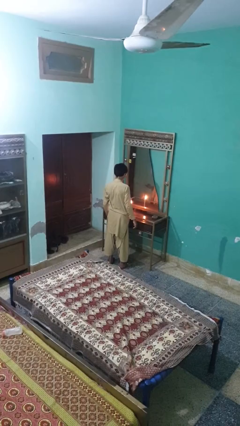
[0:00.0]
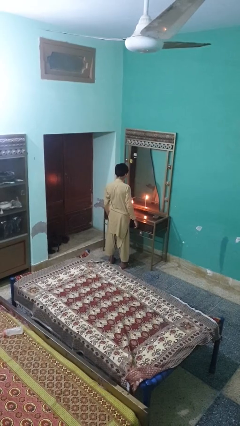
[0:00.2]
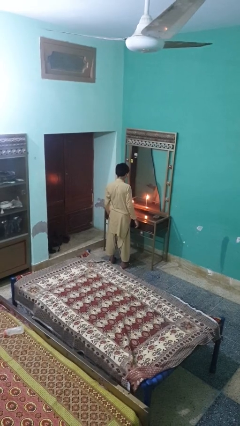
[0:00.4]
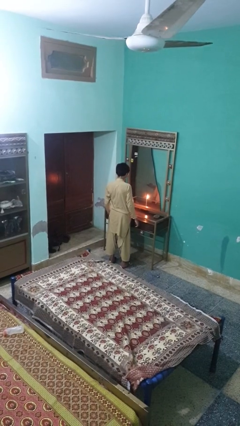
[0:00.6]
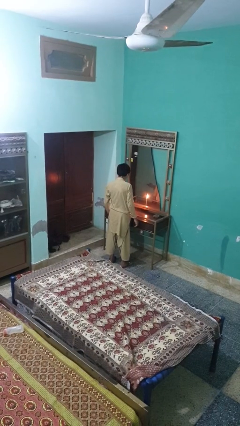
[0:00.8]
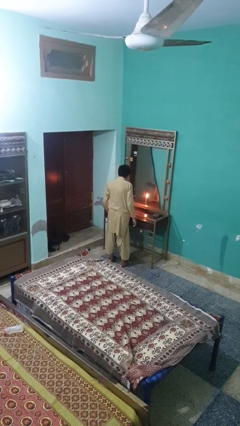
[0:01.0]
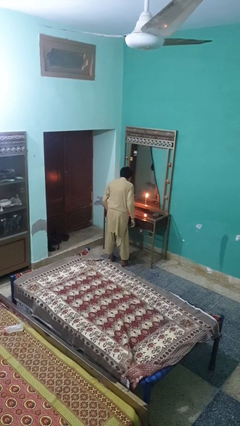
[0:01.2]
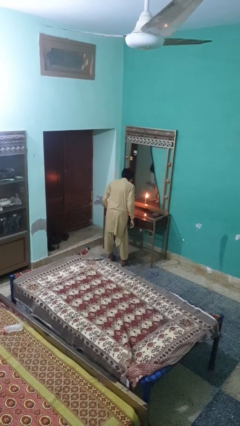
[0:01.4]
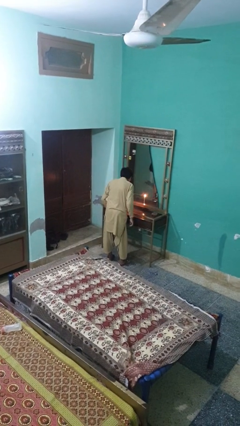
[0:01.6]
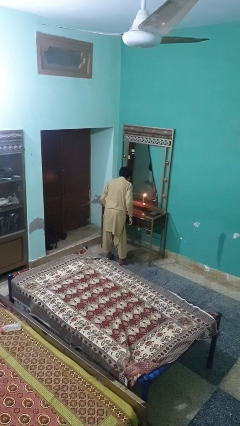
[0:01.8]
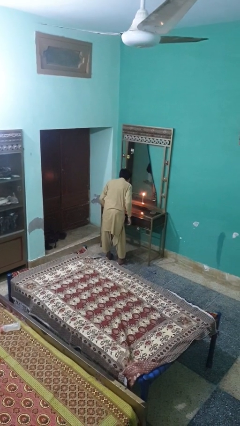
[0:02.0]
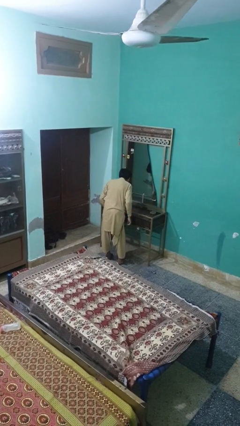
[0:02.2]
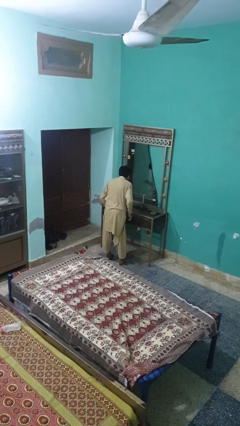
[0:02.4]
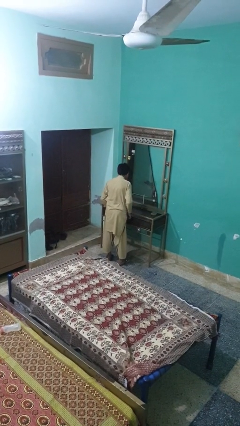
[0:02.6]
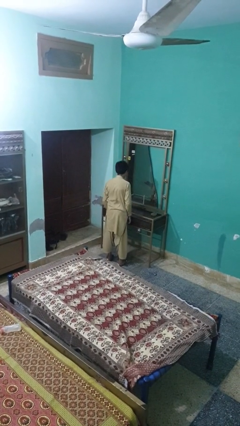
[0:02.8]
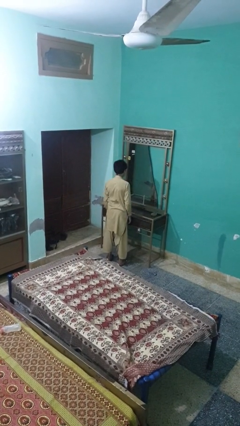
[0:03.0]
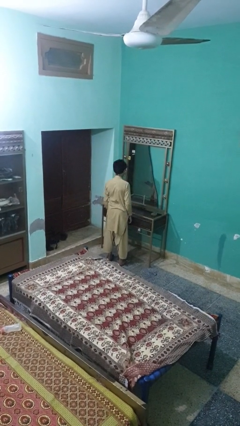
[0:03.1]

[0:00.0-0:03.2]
person extinguishes candle

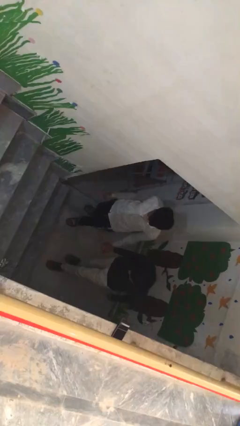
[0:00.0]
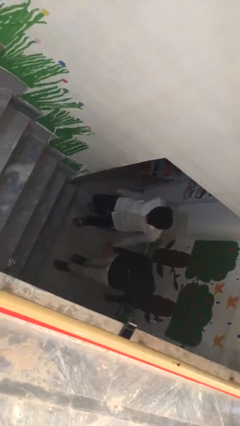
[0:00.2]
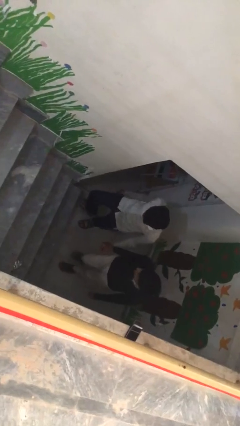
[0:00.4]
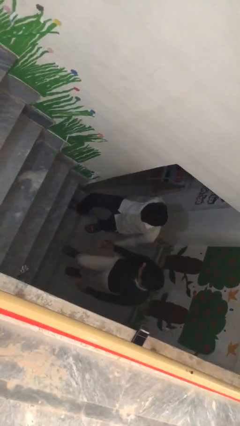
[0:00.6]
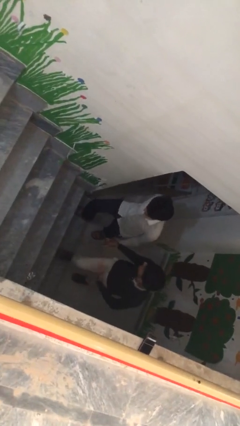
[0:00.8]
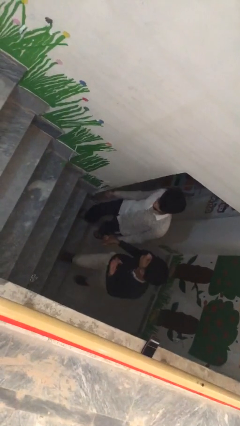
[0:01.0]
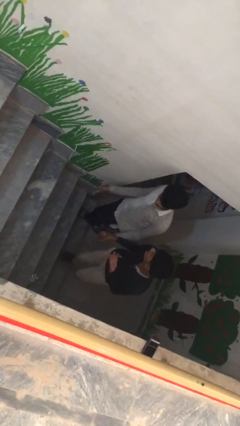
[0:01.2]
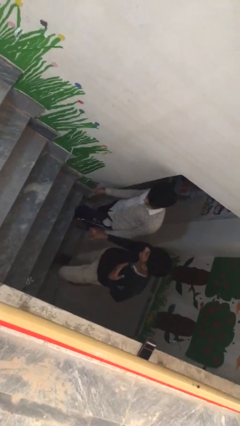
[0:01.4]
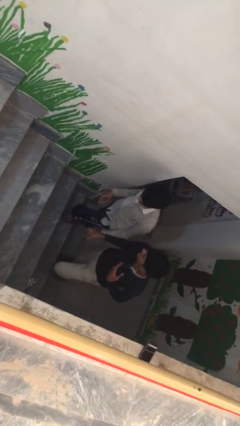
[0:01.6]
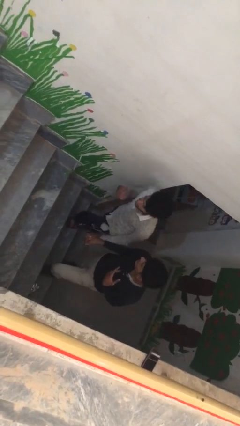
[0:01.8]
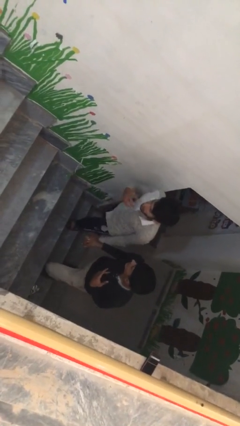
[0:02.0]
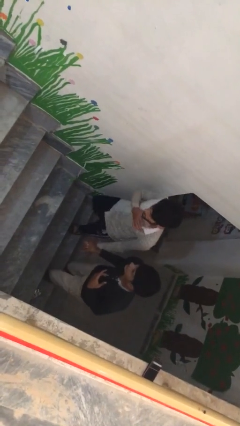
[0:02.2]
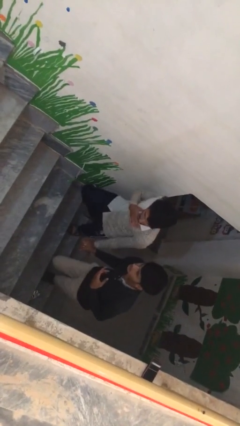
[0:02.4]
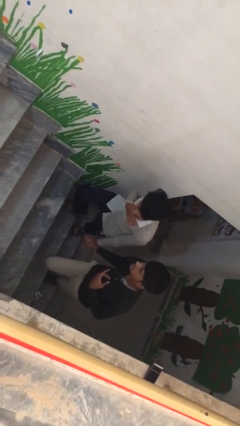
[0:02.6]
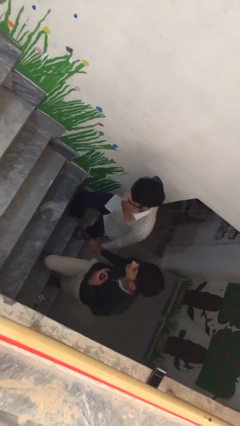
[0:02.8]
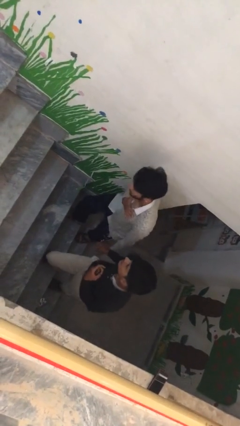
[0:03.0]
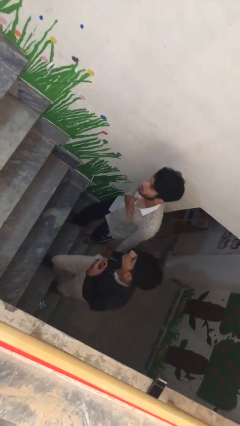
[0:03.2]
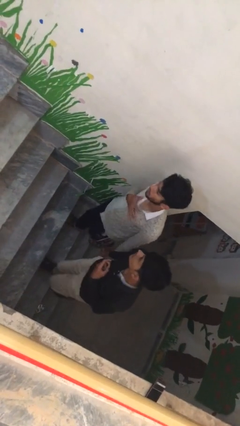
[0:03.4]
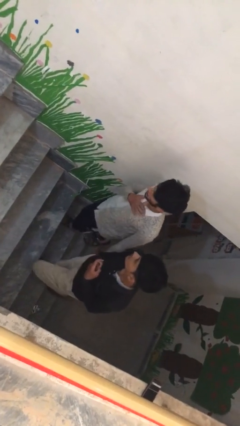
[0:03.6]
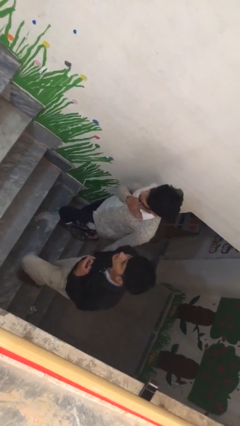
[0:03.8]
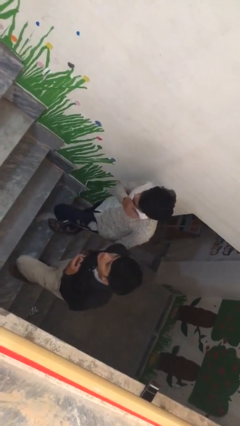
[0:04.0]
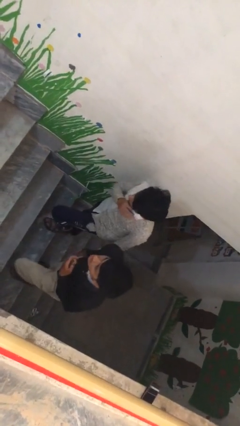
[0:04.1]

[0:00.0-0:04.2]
person holds hand

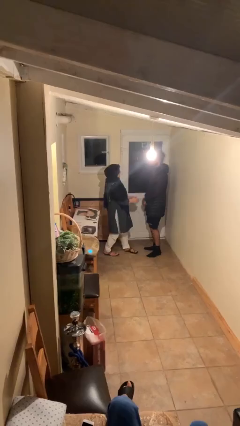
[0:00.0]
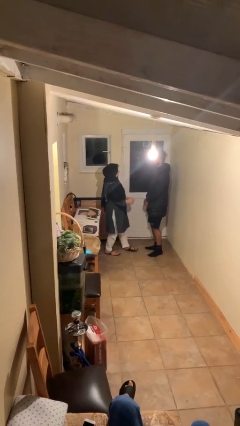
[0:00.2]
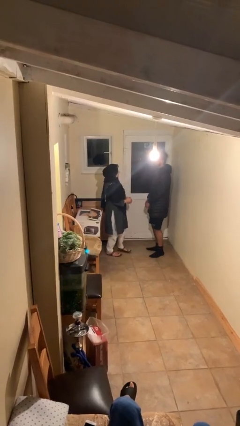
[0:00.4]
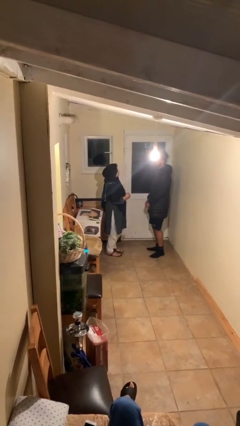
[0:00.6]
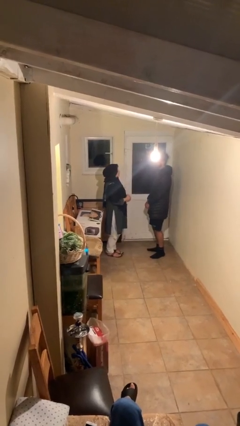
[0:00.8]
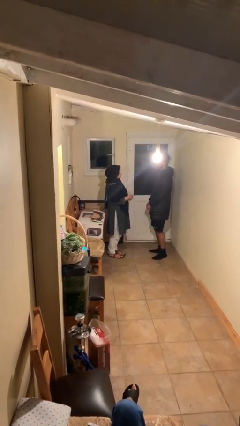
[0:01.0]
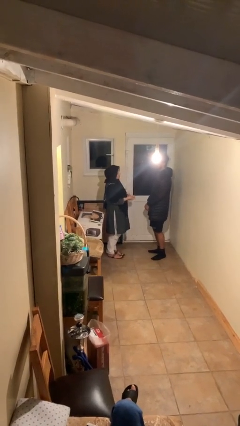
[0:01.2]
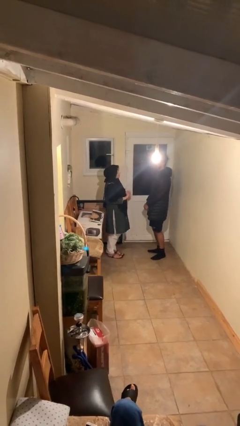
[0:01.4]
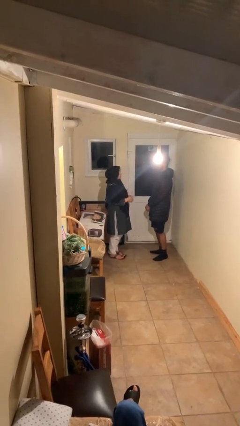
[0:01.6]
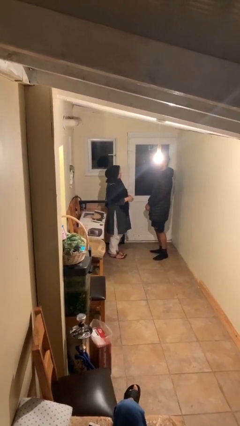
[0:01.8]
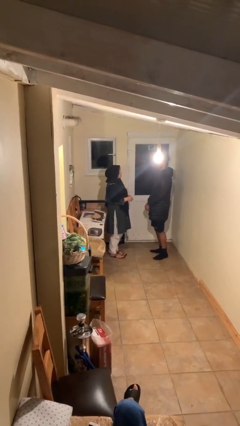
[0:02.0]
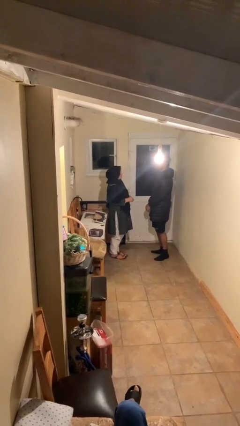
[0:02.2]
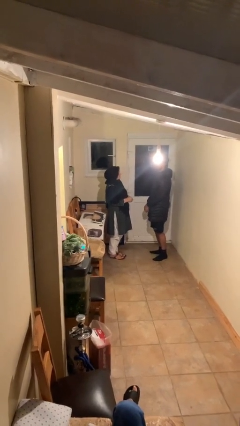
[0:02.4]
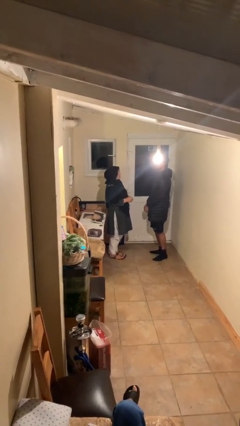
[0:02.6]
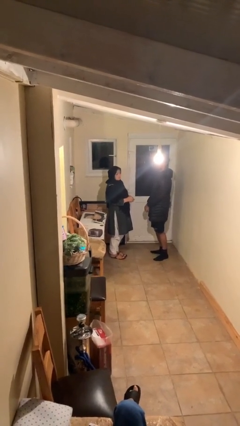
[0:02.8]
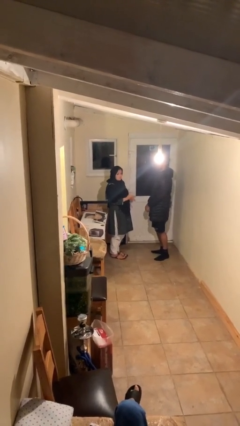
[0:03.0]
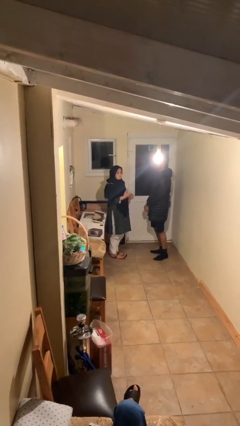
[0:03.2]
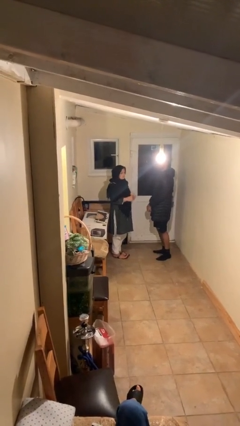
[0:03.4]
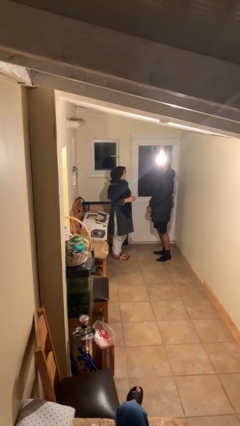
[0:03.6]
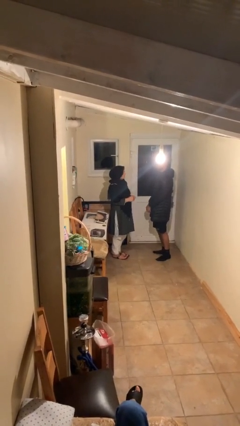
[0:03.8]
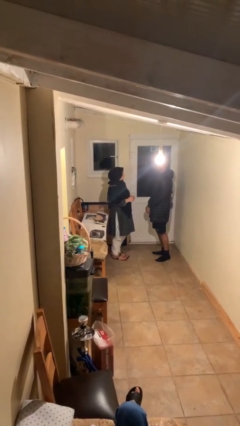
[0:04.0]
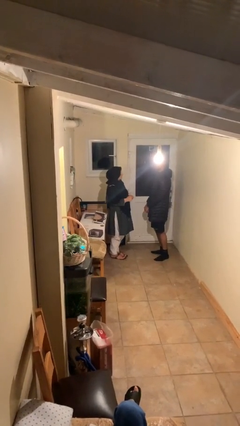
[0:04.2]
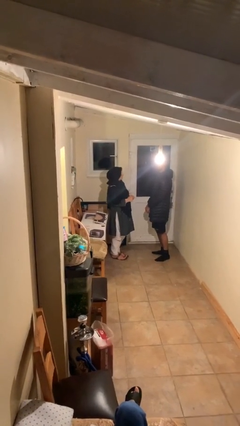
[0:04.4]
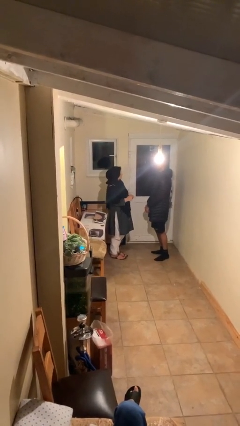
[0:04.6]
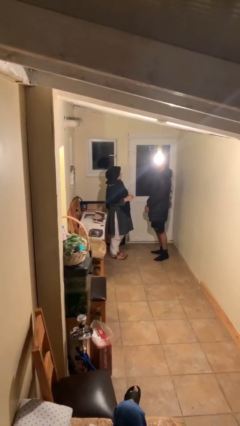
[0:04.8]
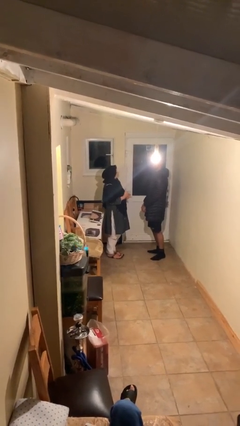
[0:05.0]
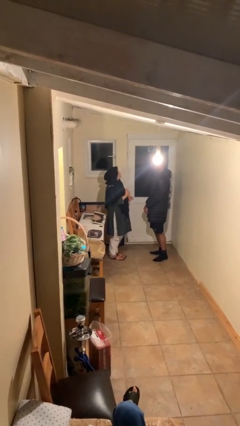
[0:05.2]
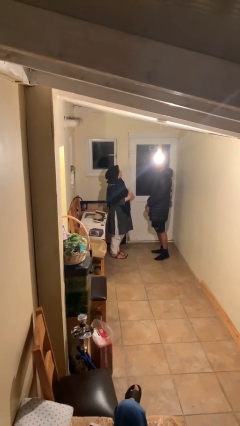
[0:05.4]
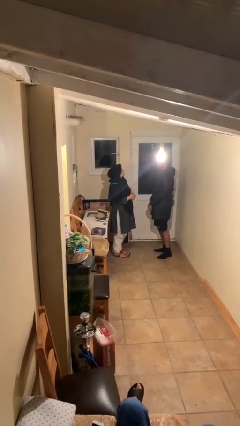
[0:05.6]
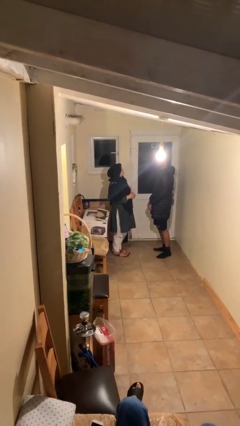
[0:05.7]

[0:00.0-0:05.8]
person talks to person

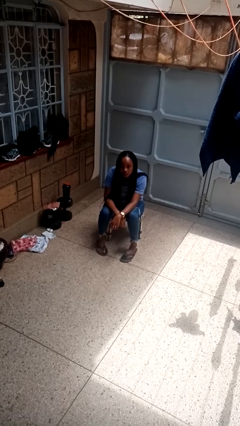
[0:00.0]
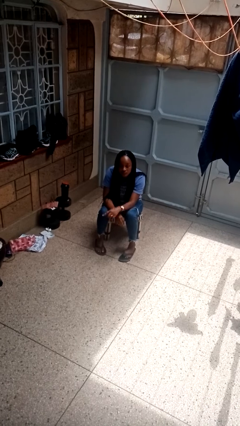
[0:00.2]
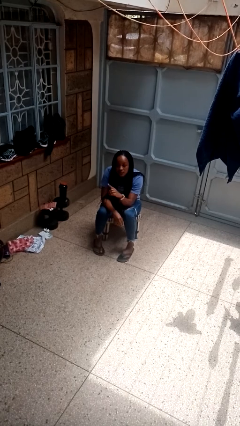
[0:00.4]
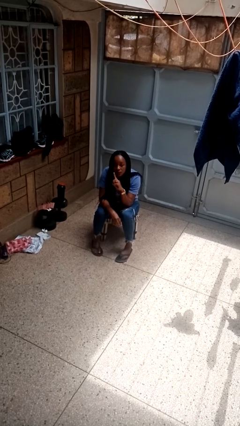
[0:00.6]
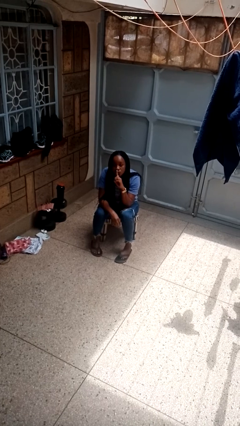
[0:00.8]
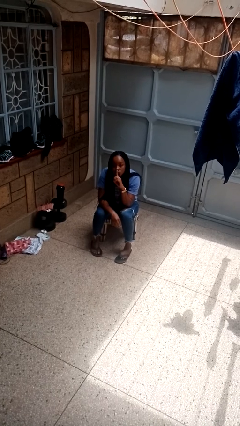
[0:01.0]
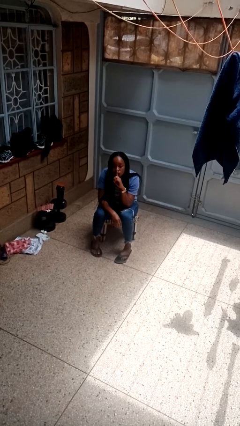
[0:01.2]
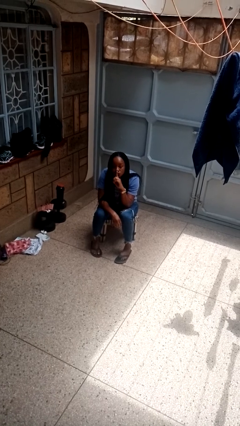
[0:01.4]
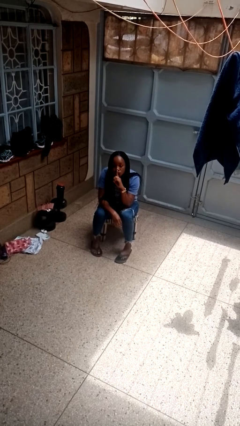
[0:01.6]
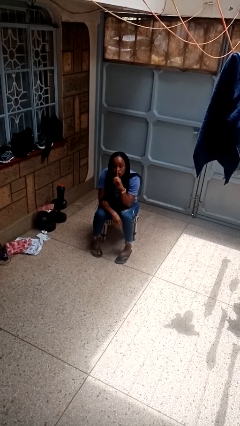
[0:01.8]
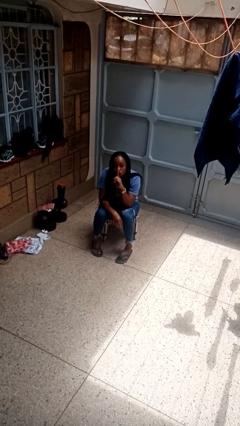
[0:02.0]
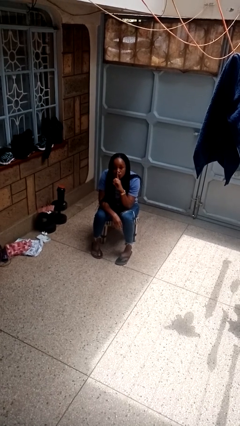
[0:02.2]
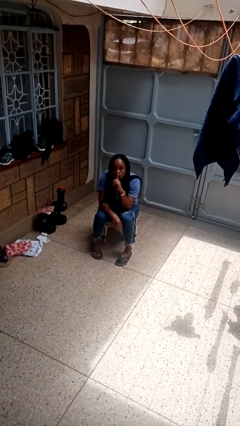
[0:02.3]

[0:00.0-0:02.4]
person gestures be quiet

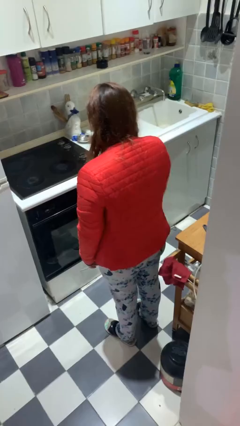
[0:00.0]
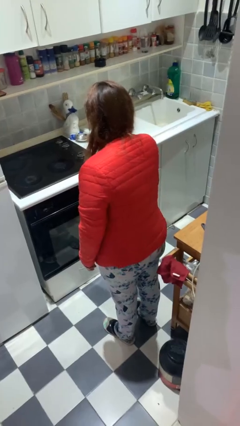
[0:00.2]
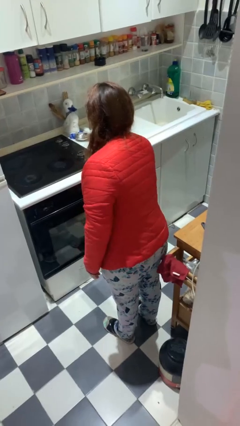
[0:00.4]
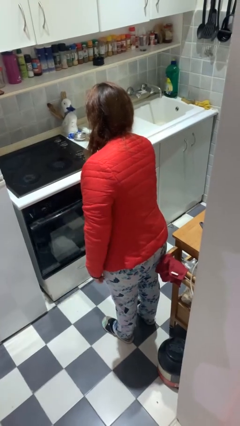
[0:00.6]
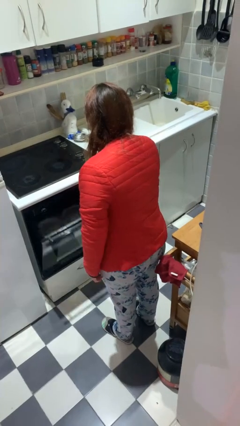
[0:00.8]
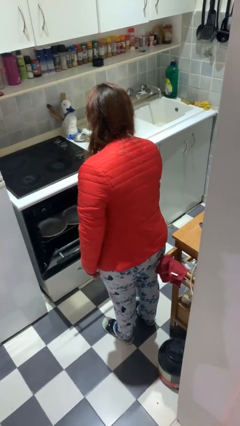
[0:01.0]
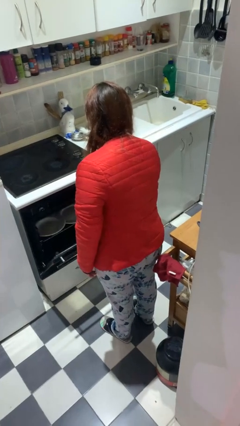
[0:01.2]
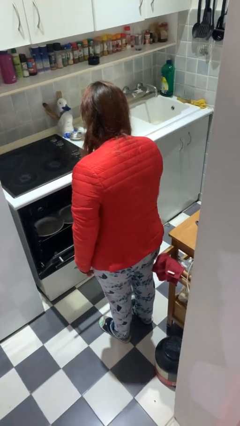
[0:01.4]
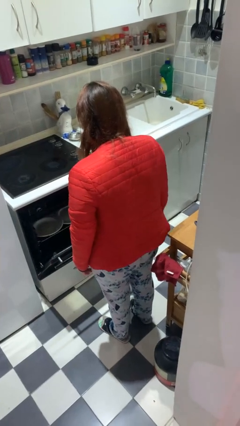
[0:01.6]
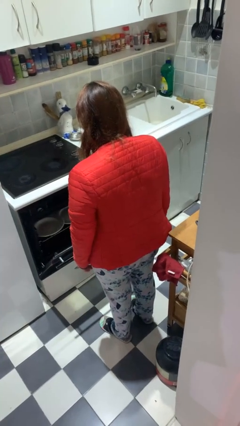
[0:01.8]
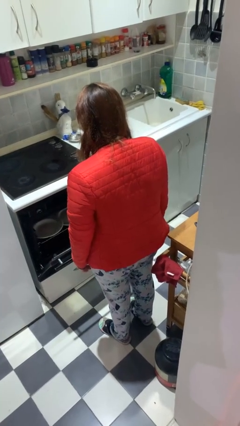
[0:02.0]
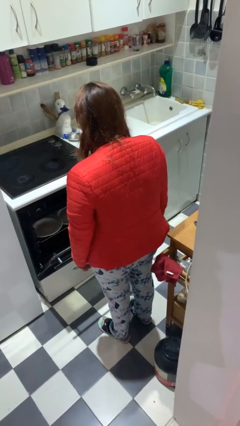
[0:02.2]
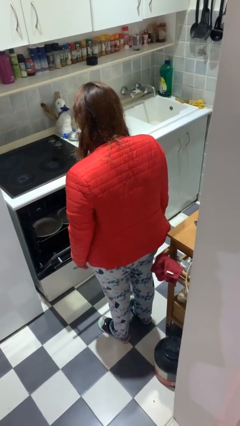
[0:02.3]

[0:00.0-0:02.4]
person opens dishwasher
